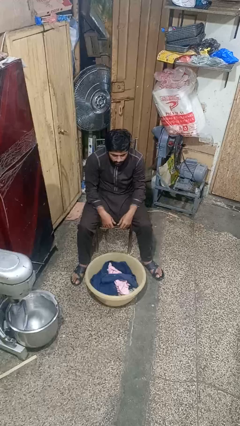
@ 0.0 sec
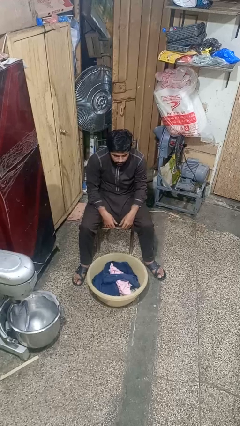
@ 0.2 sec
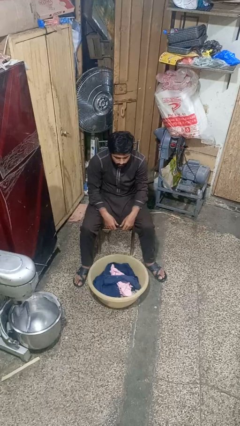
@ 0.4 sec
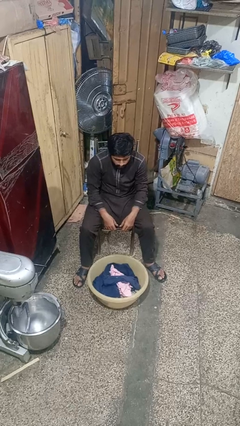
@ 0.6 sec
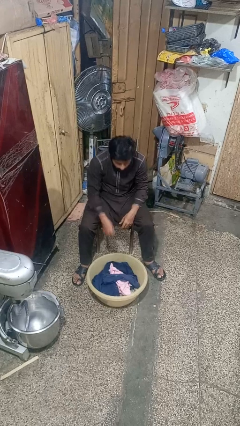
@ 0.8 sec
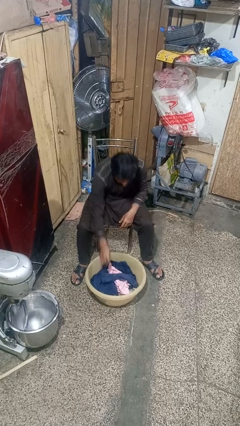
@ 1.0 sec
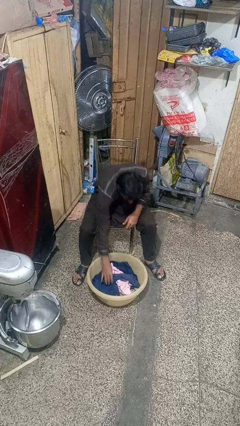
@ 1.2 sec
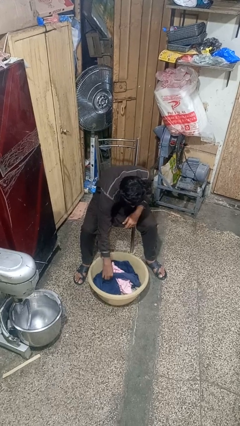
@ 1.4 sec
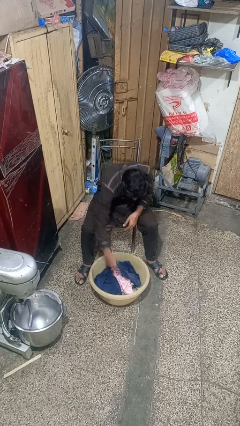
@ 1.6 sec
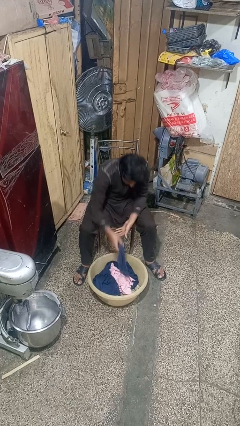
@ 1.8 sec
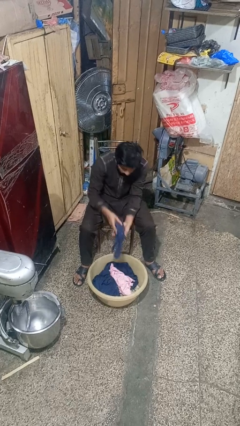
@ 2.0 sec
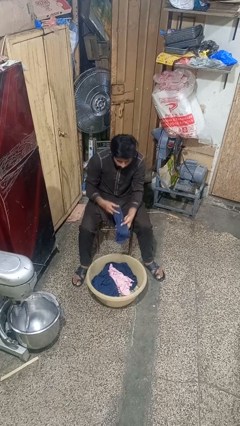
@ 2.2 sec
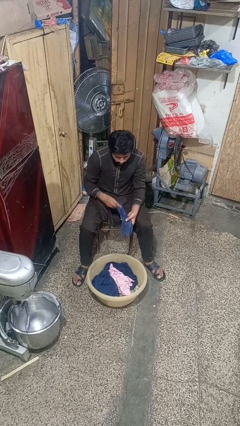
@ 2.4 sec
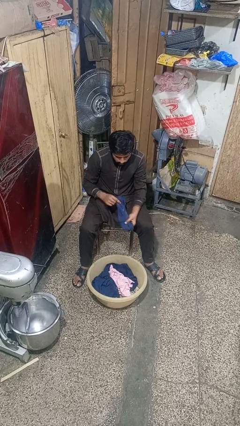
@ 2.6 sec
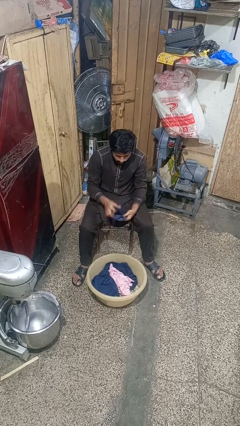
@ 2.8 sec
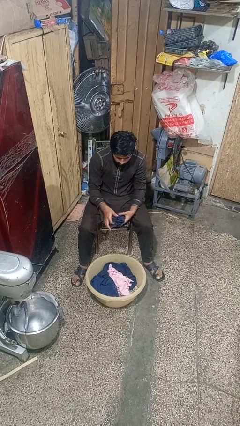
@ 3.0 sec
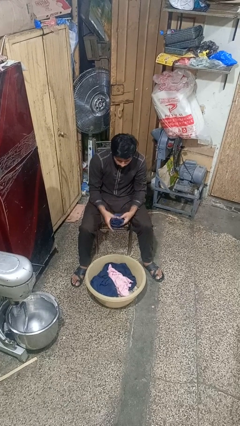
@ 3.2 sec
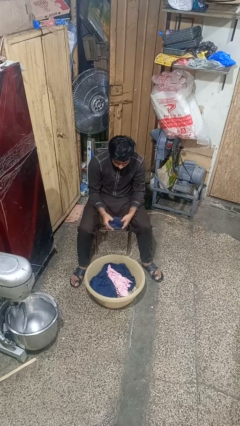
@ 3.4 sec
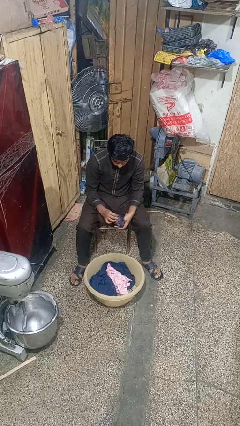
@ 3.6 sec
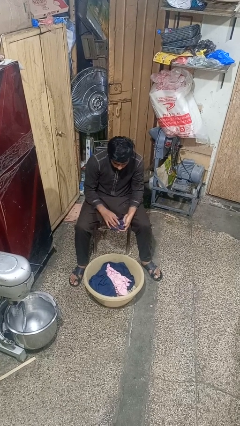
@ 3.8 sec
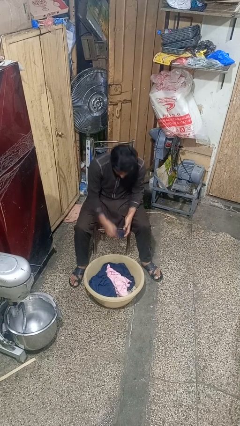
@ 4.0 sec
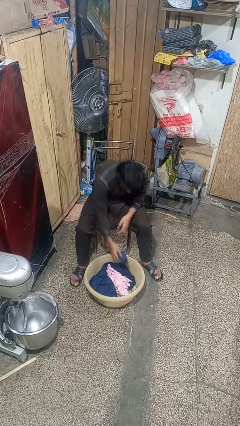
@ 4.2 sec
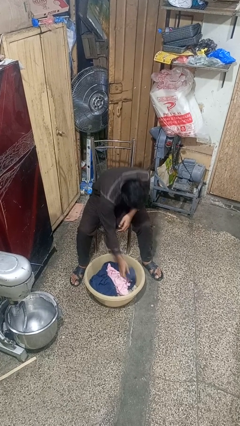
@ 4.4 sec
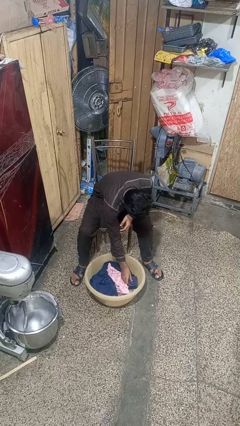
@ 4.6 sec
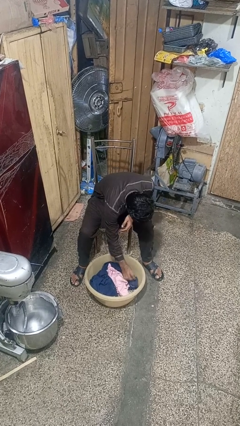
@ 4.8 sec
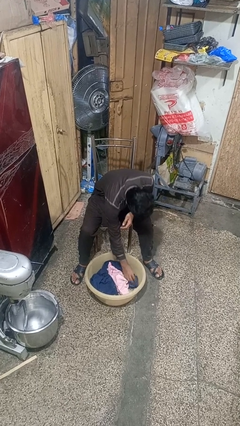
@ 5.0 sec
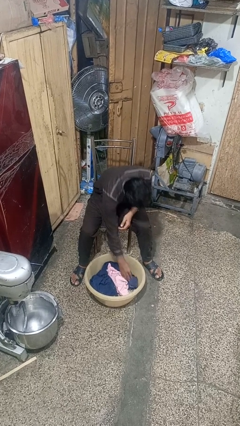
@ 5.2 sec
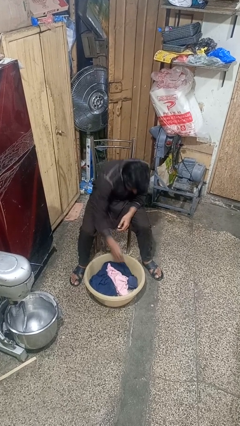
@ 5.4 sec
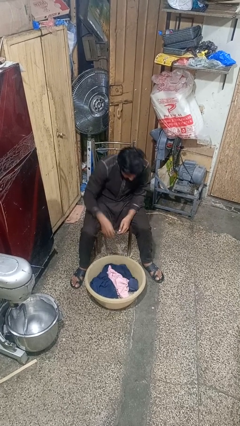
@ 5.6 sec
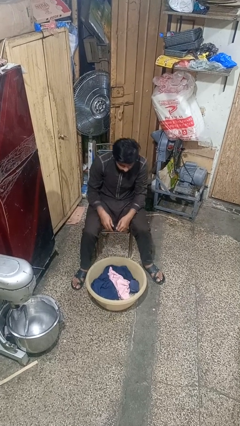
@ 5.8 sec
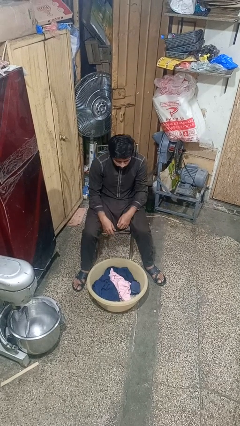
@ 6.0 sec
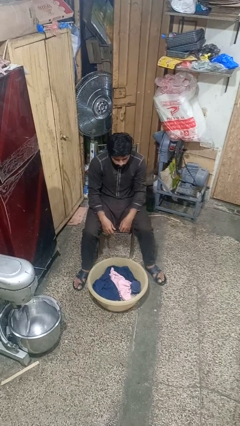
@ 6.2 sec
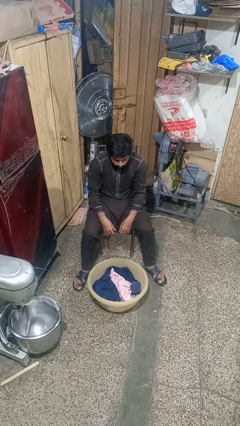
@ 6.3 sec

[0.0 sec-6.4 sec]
person folds socks

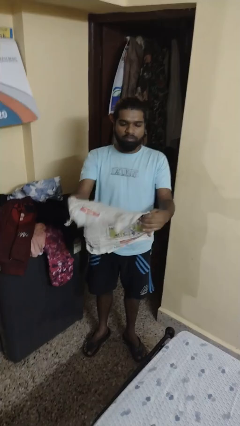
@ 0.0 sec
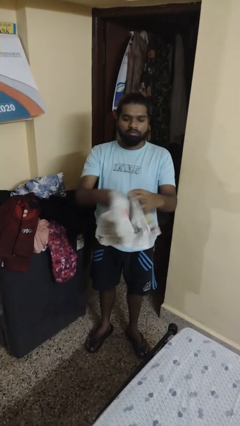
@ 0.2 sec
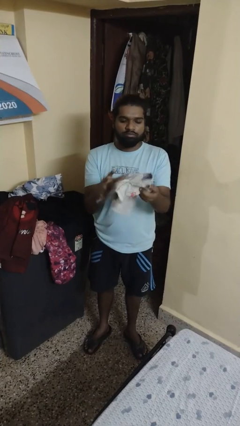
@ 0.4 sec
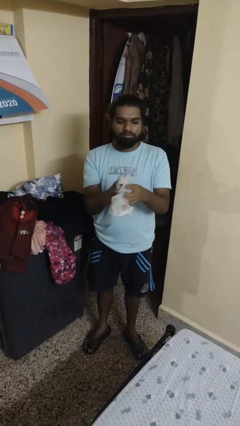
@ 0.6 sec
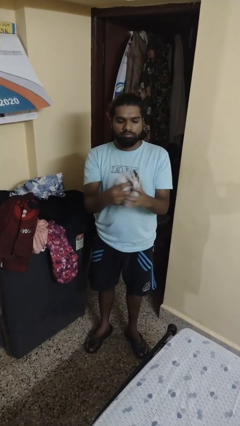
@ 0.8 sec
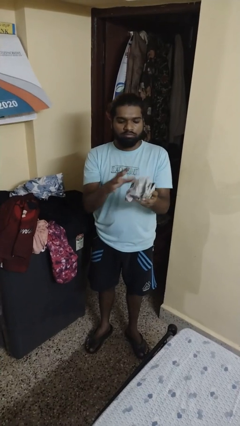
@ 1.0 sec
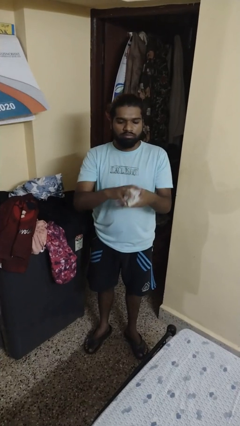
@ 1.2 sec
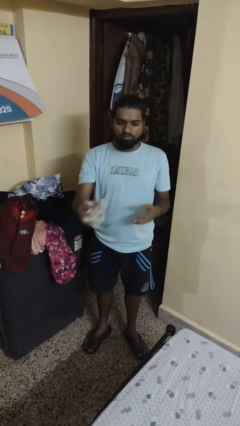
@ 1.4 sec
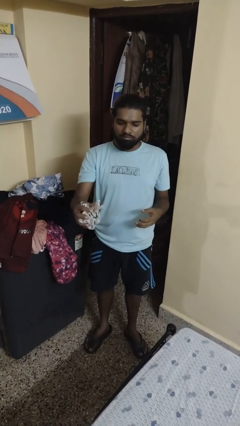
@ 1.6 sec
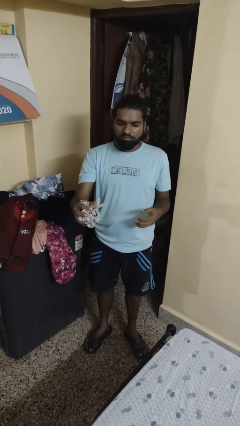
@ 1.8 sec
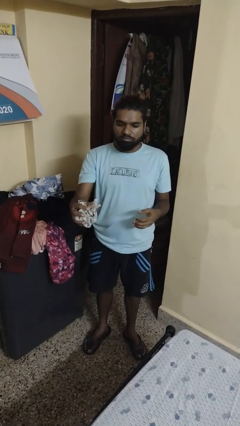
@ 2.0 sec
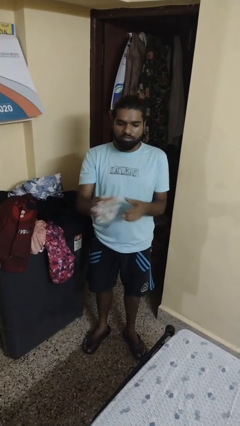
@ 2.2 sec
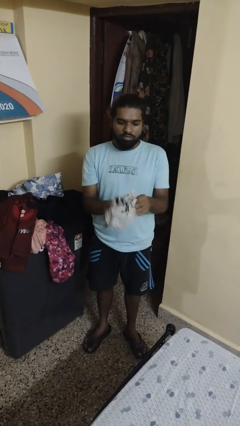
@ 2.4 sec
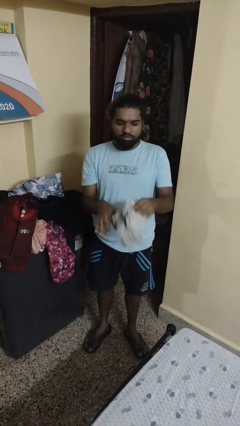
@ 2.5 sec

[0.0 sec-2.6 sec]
person crumples paper

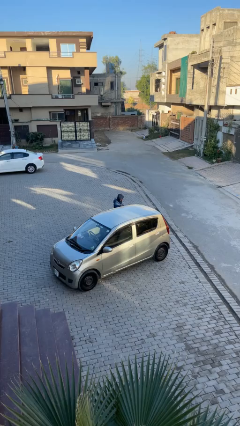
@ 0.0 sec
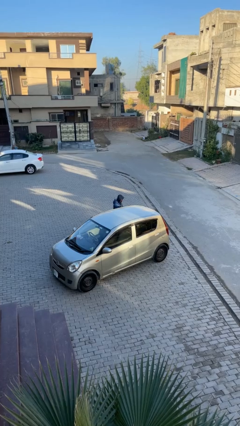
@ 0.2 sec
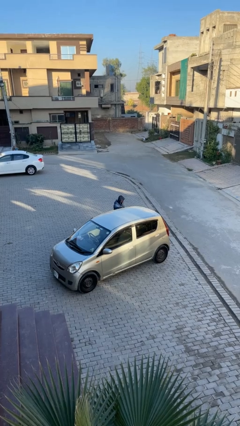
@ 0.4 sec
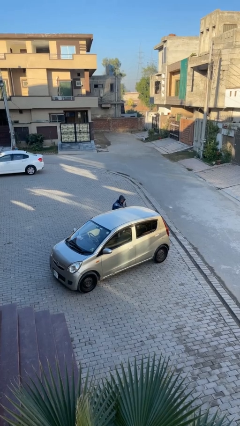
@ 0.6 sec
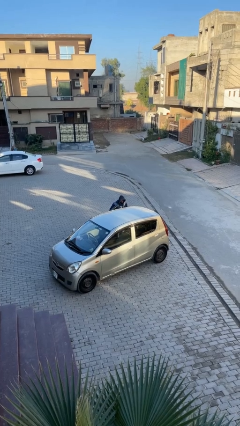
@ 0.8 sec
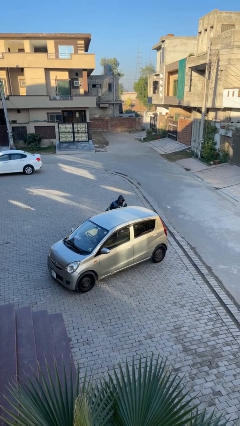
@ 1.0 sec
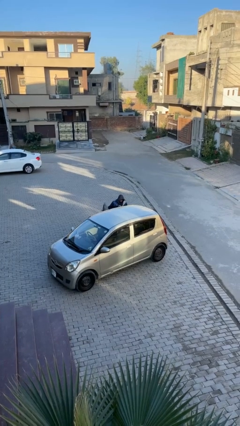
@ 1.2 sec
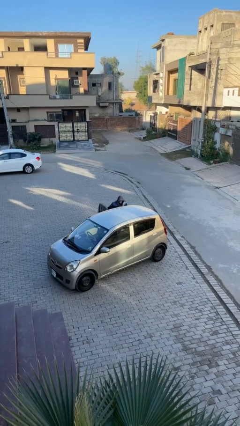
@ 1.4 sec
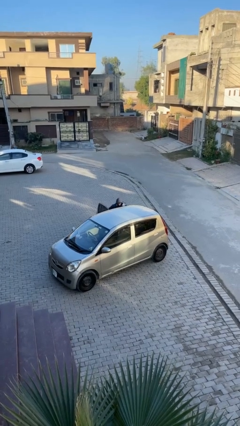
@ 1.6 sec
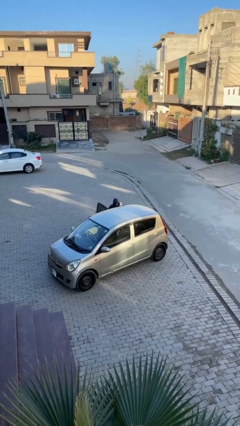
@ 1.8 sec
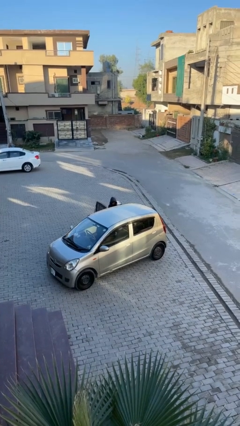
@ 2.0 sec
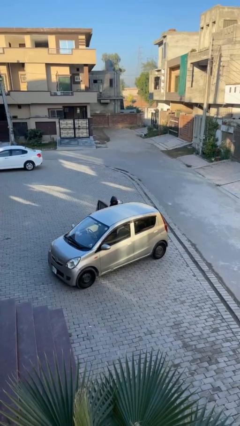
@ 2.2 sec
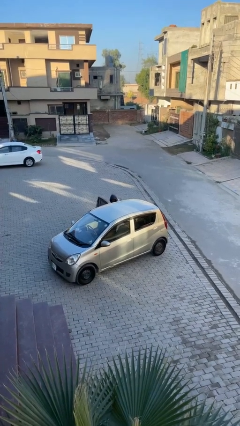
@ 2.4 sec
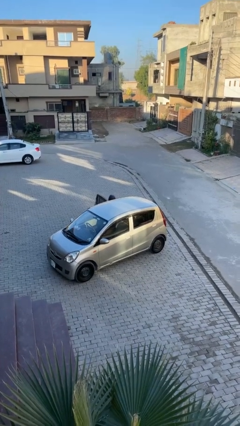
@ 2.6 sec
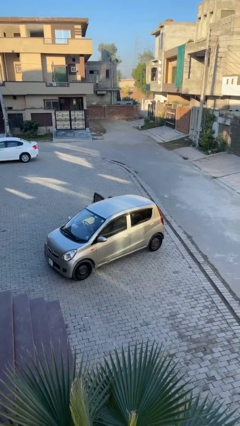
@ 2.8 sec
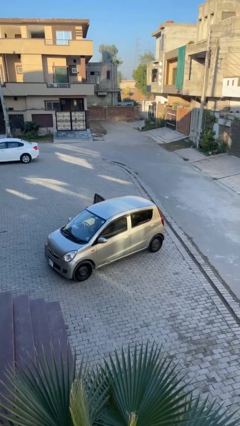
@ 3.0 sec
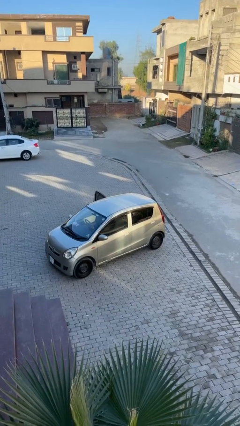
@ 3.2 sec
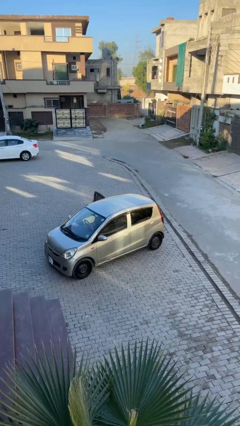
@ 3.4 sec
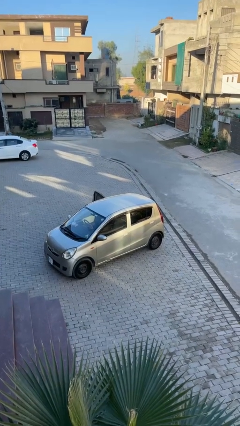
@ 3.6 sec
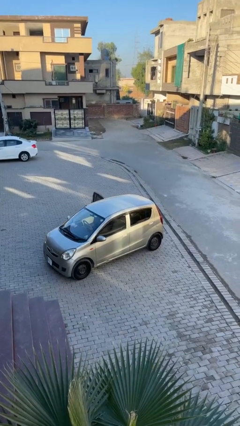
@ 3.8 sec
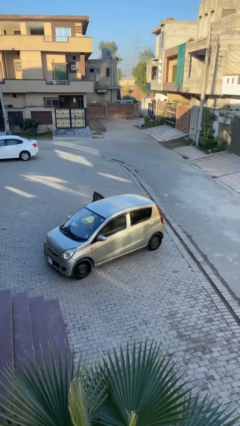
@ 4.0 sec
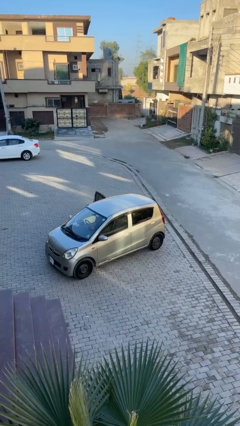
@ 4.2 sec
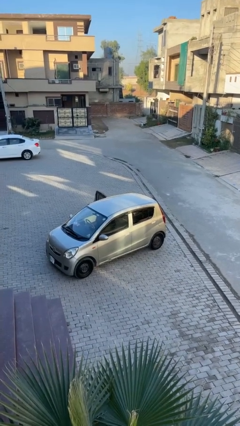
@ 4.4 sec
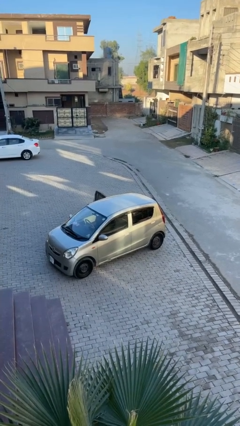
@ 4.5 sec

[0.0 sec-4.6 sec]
person enters car

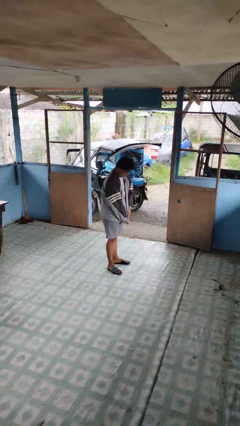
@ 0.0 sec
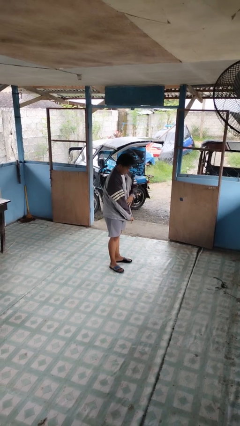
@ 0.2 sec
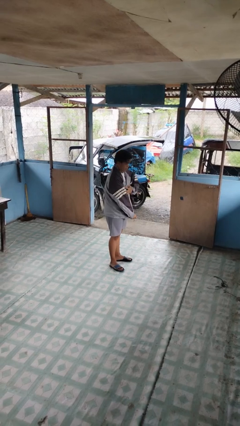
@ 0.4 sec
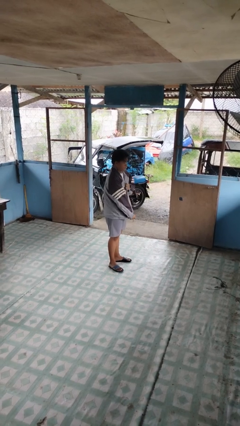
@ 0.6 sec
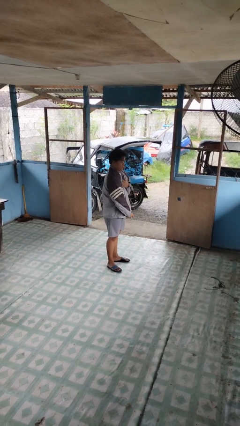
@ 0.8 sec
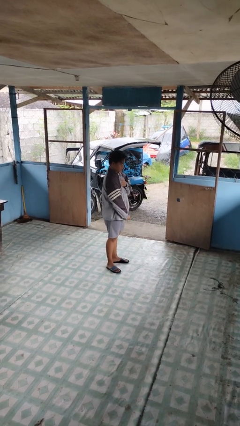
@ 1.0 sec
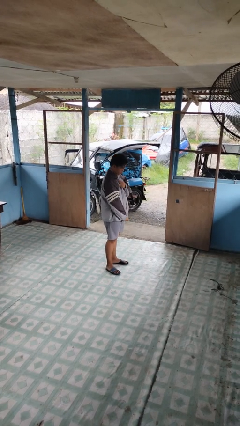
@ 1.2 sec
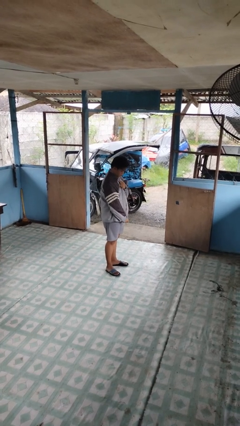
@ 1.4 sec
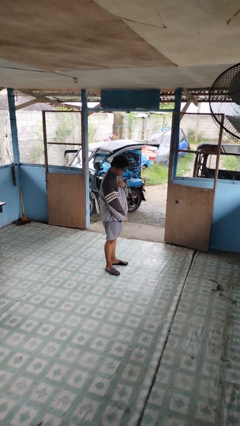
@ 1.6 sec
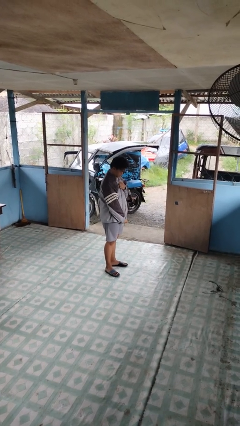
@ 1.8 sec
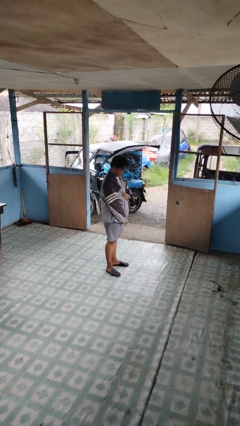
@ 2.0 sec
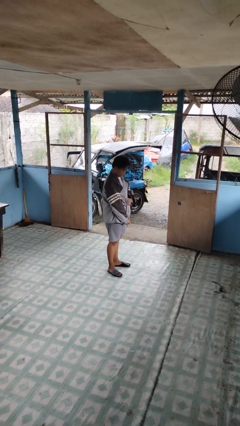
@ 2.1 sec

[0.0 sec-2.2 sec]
person zips up jacket

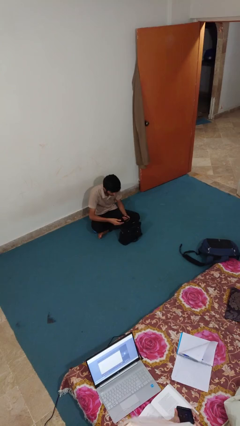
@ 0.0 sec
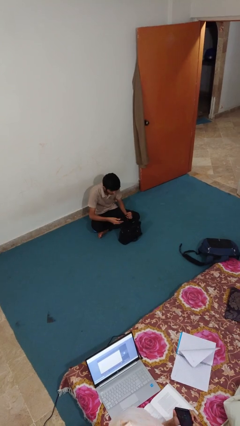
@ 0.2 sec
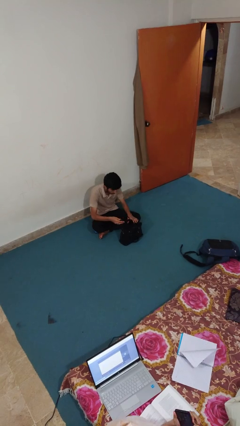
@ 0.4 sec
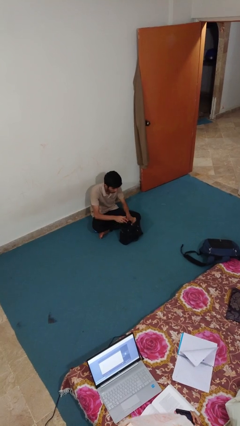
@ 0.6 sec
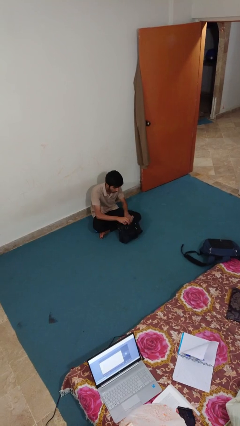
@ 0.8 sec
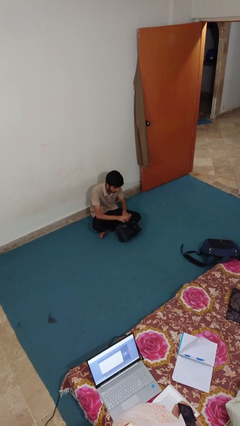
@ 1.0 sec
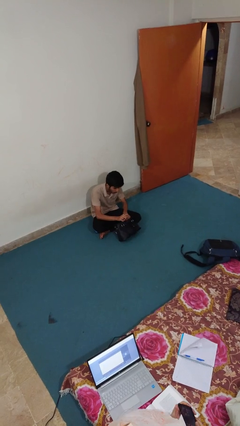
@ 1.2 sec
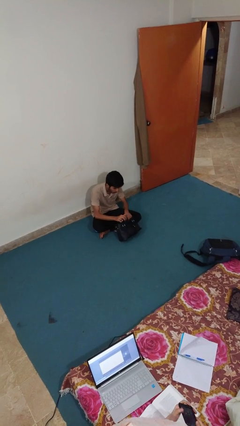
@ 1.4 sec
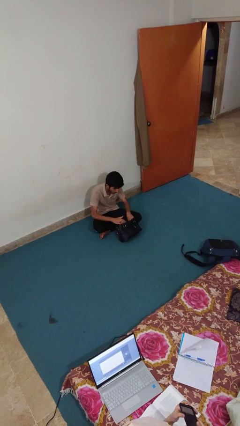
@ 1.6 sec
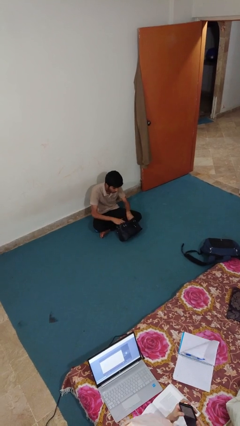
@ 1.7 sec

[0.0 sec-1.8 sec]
person puts object into purse
